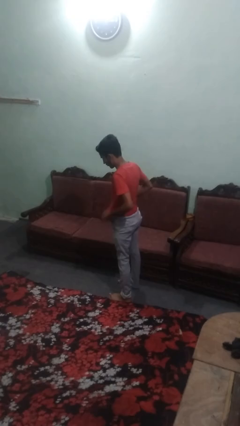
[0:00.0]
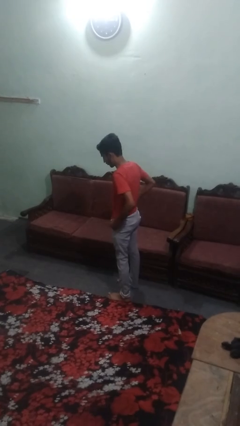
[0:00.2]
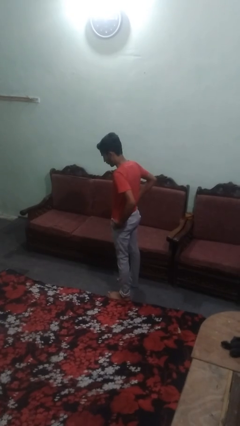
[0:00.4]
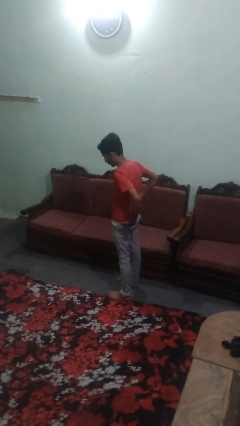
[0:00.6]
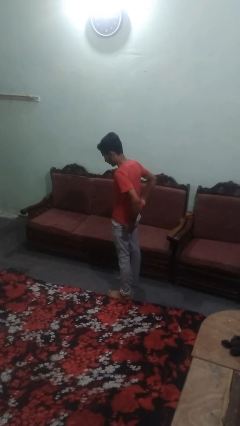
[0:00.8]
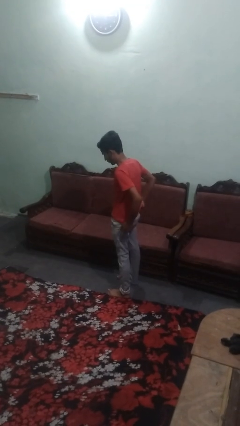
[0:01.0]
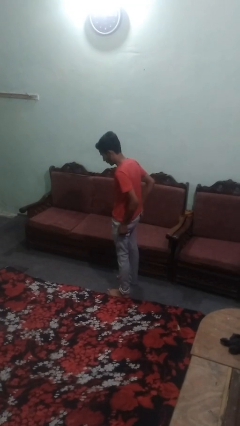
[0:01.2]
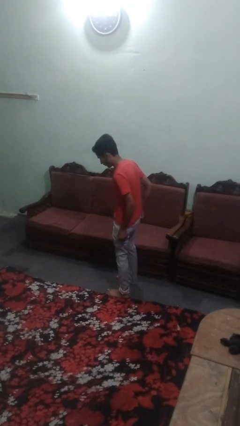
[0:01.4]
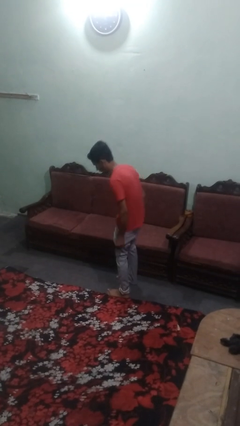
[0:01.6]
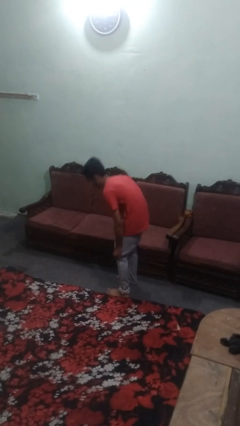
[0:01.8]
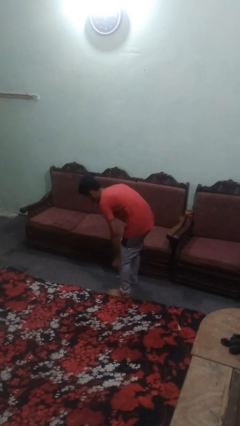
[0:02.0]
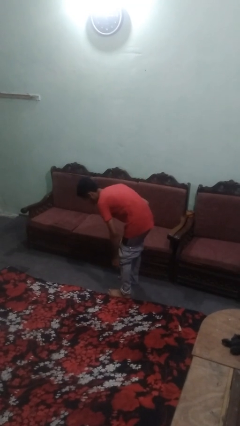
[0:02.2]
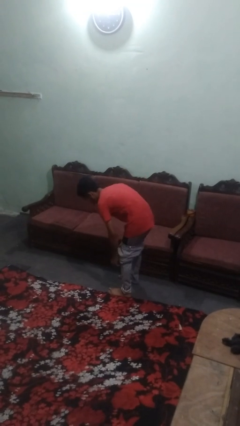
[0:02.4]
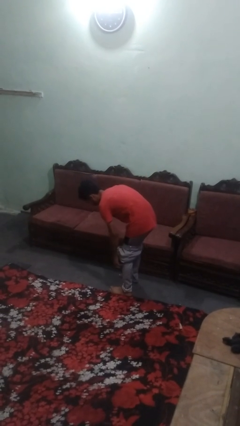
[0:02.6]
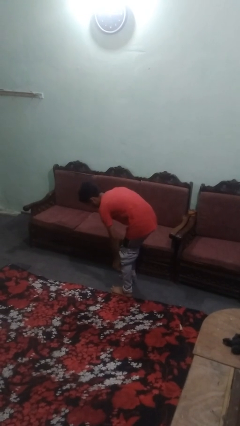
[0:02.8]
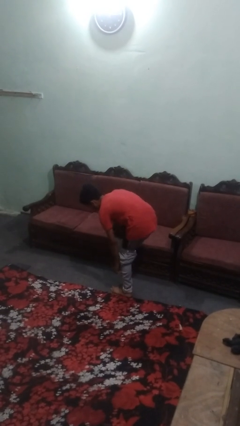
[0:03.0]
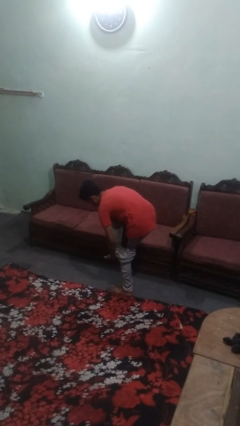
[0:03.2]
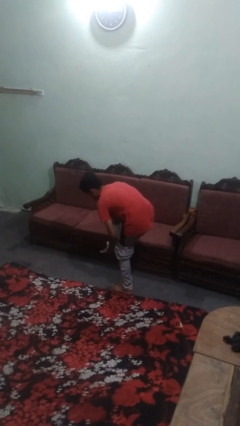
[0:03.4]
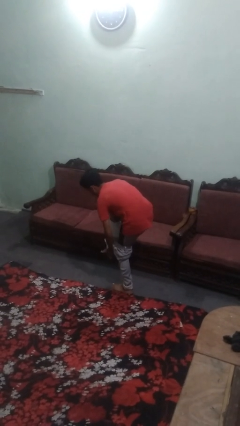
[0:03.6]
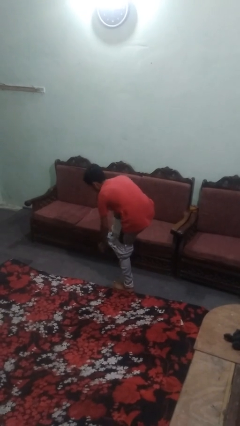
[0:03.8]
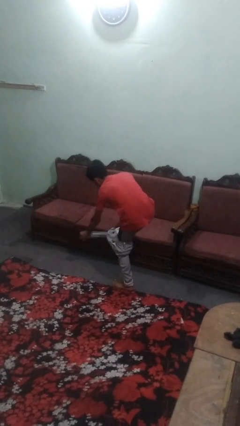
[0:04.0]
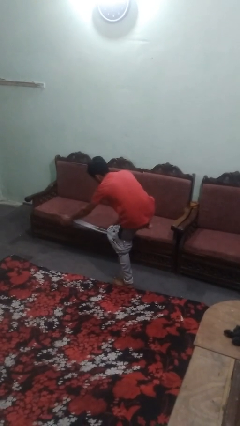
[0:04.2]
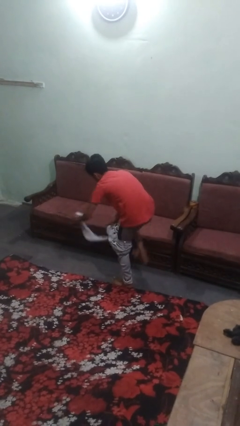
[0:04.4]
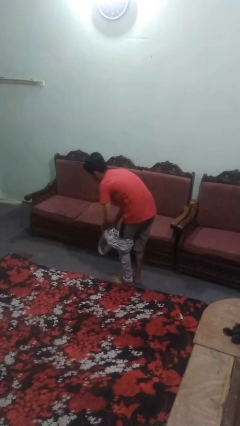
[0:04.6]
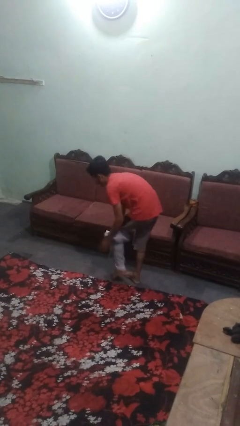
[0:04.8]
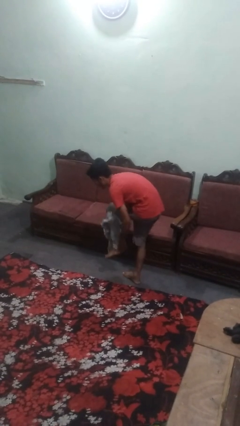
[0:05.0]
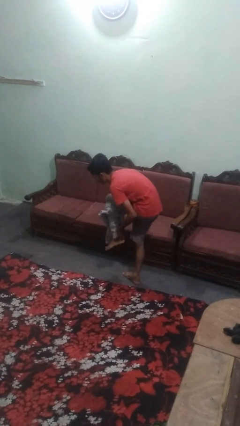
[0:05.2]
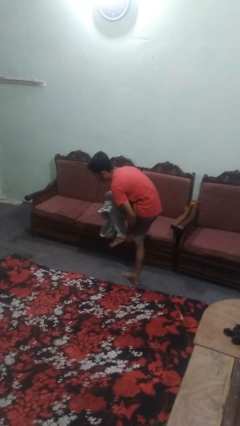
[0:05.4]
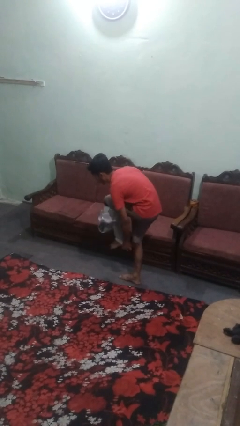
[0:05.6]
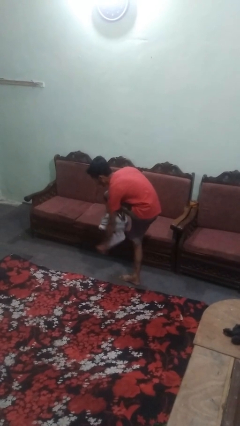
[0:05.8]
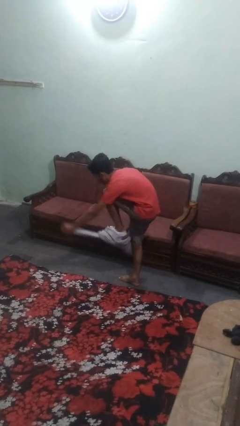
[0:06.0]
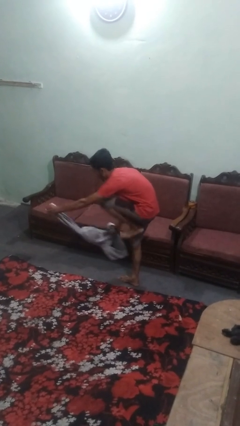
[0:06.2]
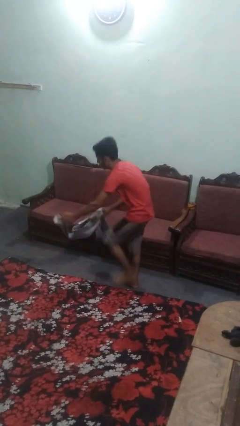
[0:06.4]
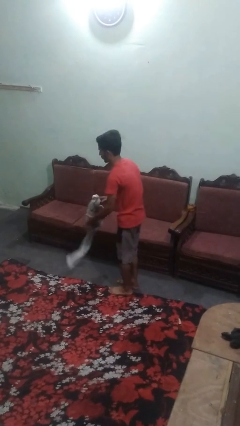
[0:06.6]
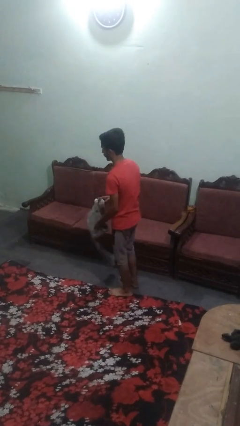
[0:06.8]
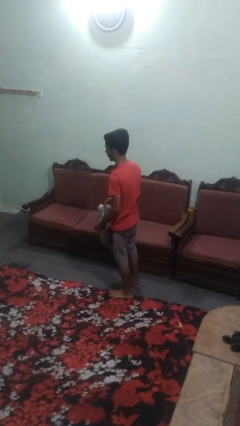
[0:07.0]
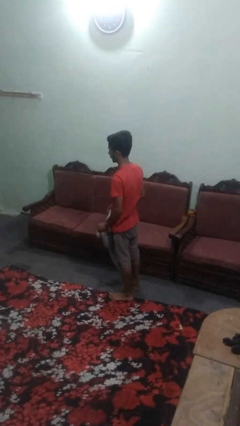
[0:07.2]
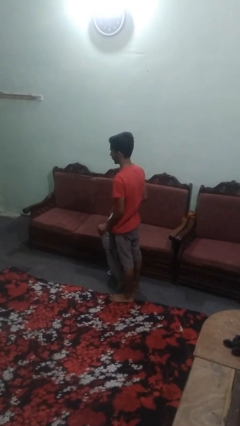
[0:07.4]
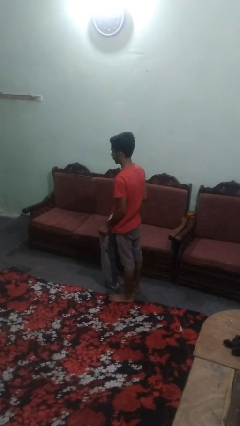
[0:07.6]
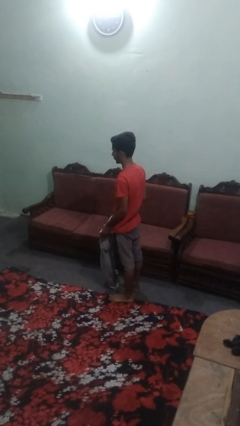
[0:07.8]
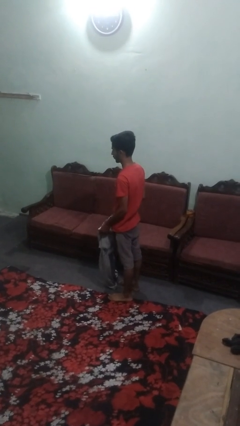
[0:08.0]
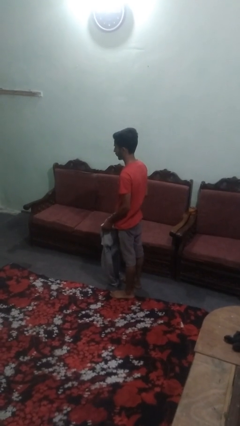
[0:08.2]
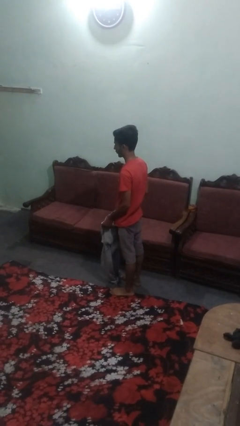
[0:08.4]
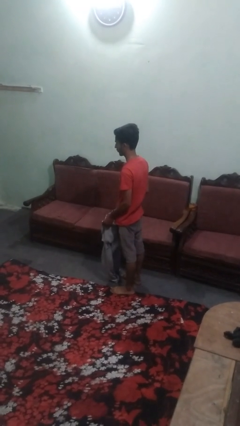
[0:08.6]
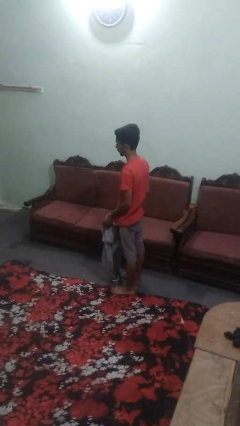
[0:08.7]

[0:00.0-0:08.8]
person puts on pants

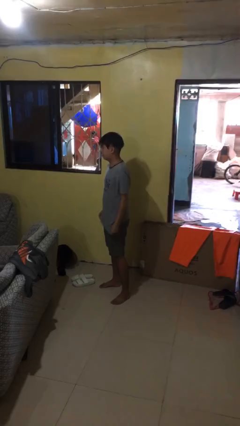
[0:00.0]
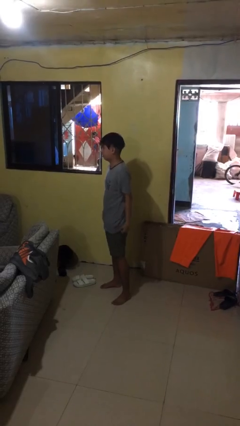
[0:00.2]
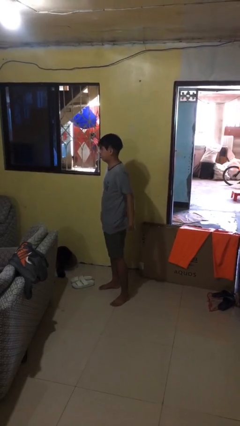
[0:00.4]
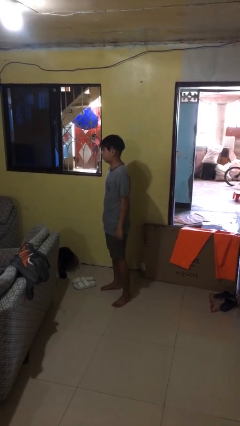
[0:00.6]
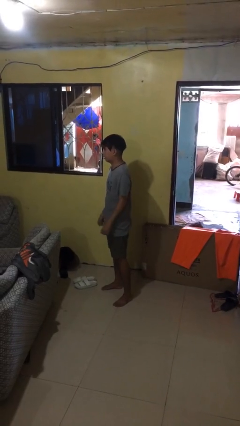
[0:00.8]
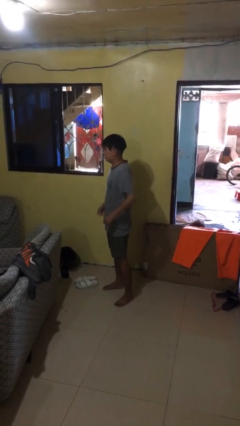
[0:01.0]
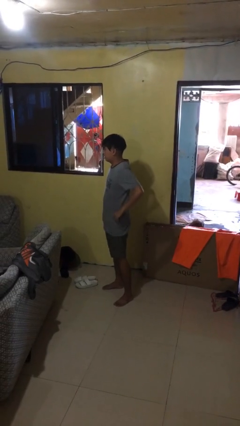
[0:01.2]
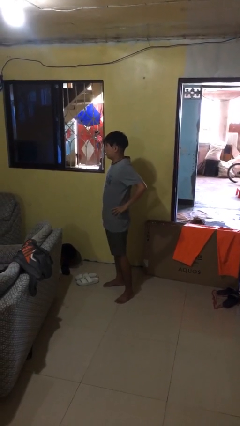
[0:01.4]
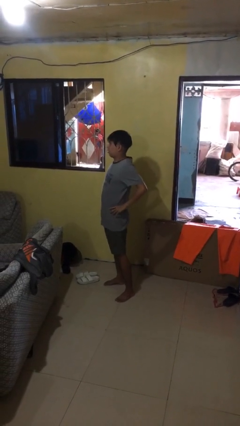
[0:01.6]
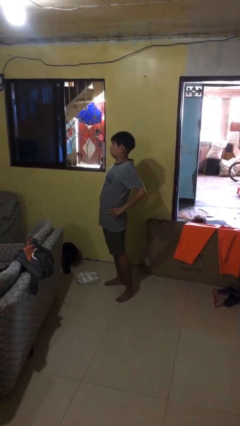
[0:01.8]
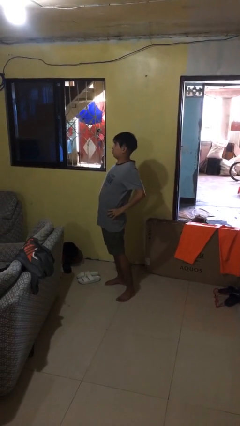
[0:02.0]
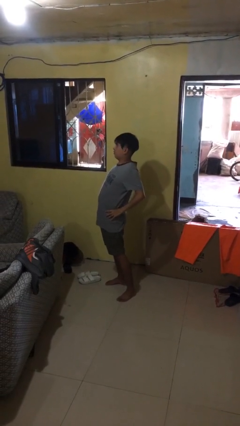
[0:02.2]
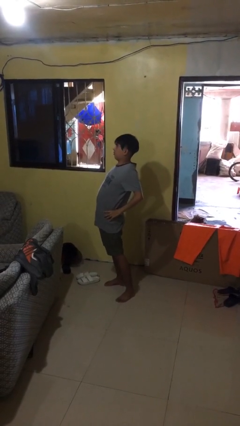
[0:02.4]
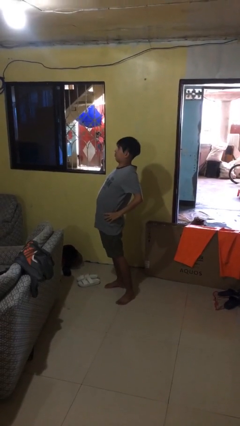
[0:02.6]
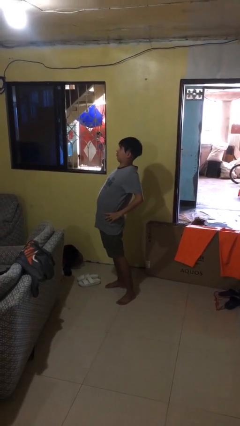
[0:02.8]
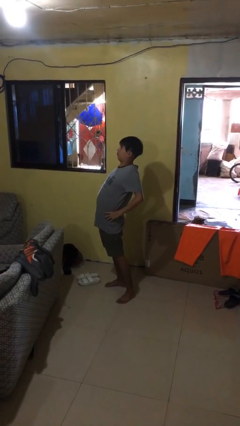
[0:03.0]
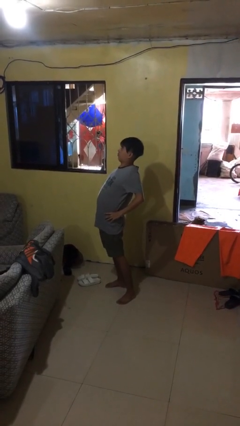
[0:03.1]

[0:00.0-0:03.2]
person stretches back

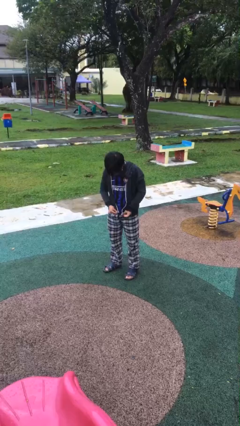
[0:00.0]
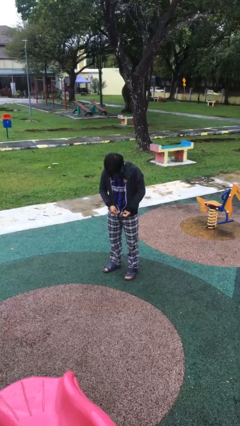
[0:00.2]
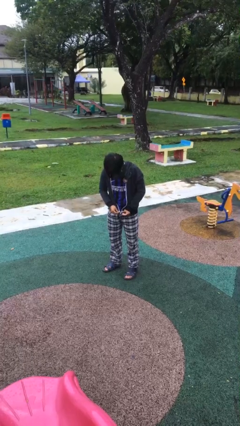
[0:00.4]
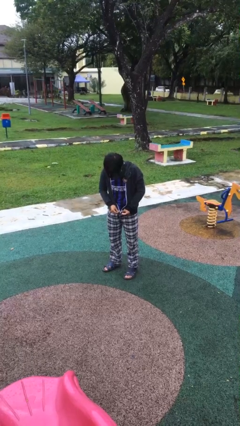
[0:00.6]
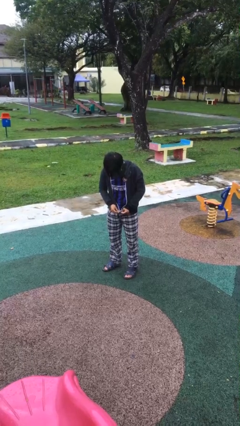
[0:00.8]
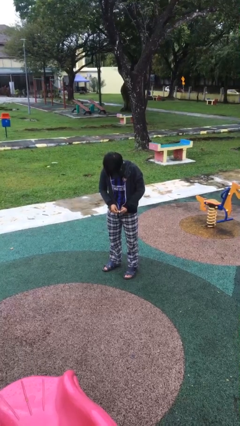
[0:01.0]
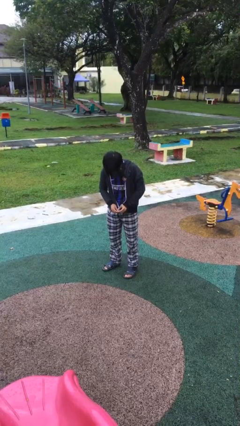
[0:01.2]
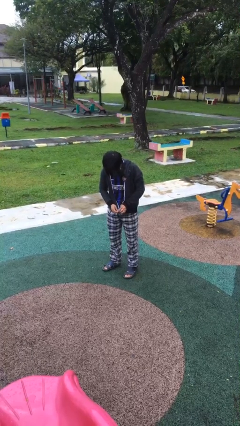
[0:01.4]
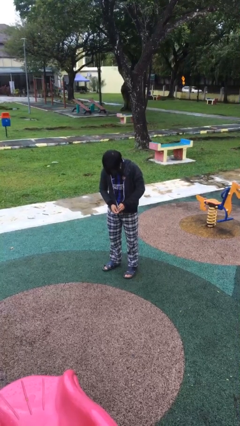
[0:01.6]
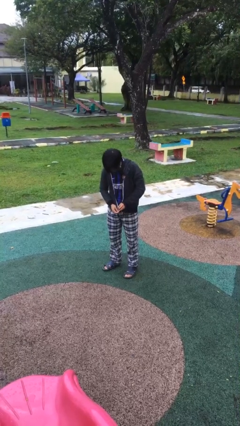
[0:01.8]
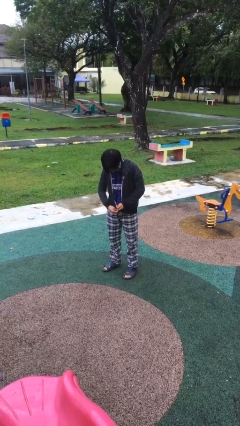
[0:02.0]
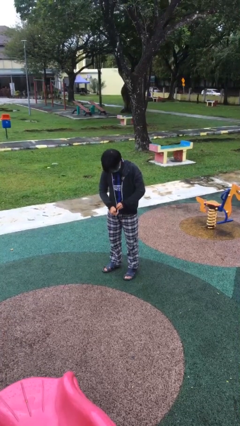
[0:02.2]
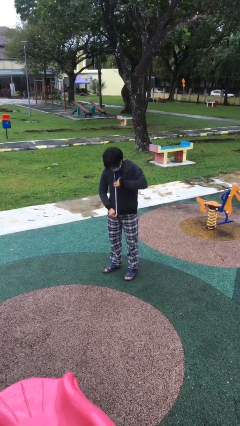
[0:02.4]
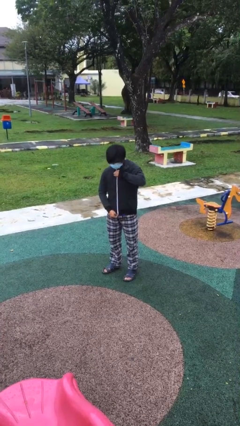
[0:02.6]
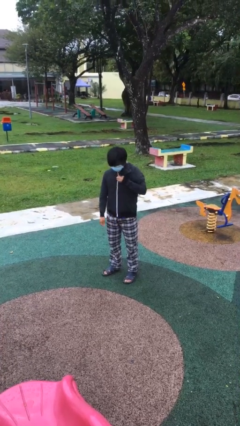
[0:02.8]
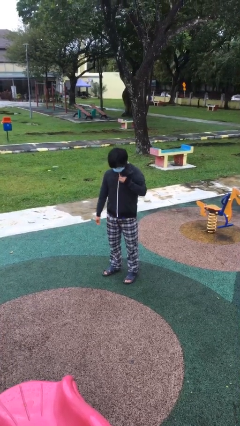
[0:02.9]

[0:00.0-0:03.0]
person zips up jacket

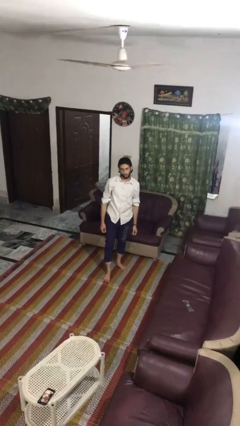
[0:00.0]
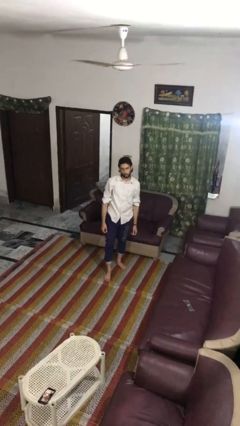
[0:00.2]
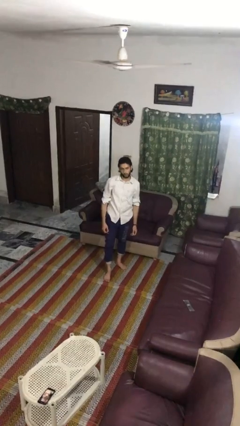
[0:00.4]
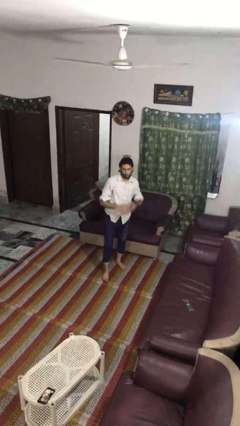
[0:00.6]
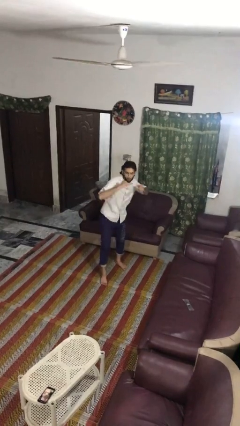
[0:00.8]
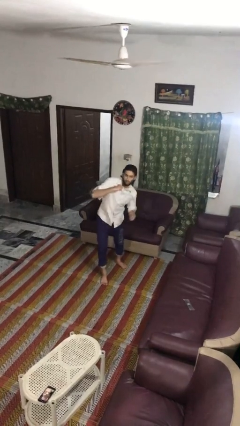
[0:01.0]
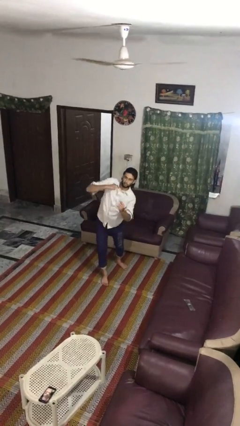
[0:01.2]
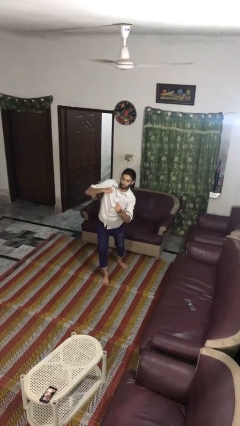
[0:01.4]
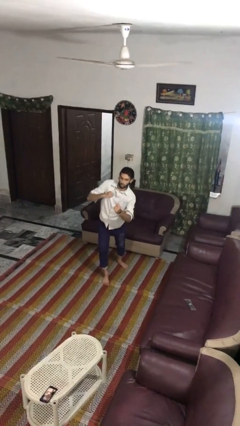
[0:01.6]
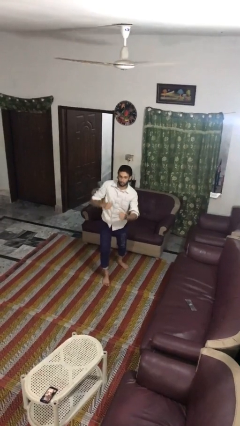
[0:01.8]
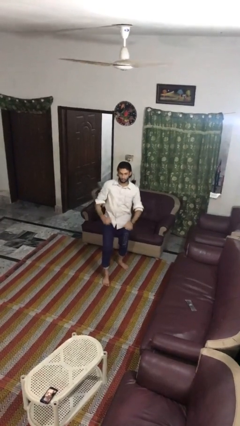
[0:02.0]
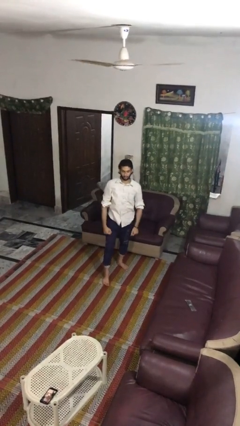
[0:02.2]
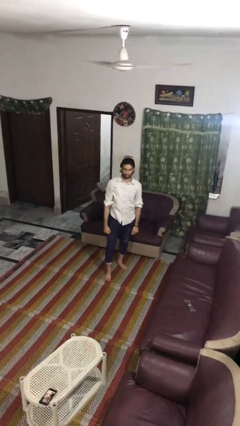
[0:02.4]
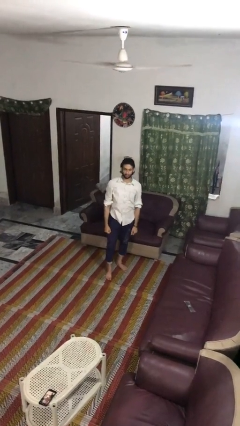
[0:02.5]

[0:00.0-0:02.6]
person punches
